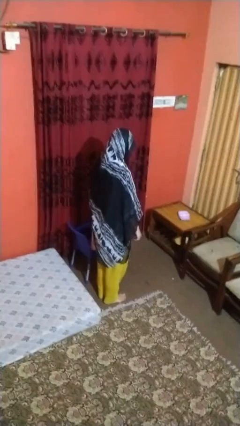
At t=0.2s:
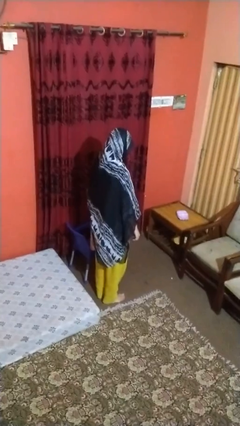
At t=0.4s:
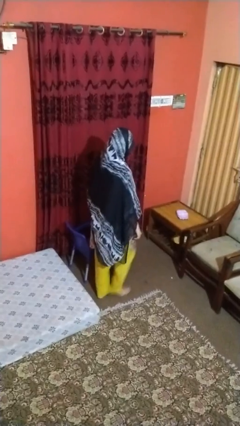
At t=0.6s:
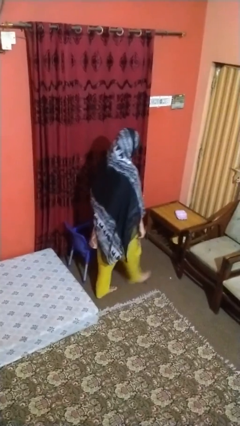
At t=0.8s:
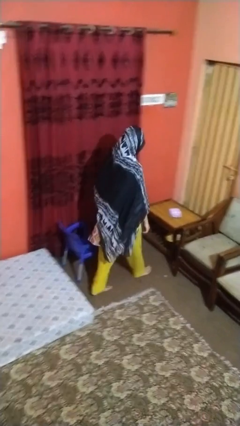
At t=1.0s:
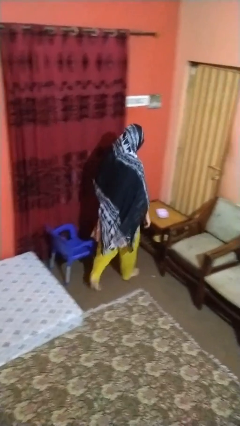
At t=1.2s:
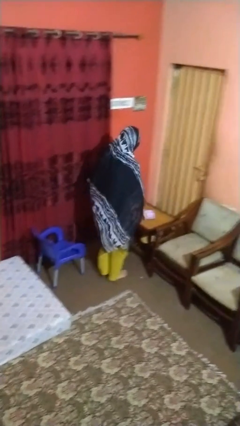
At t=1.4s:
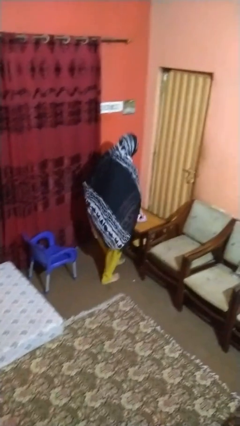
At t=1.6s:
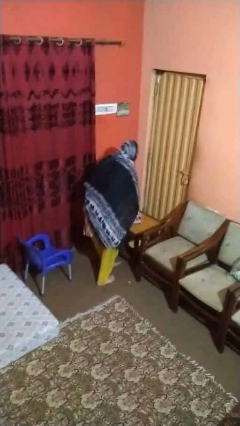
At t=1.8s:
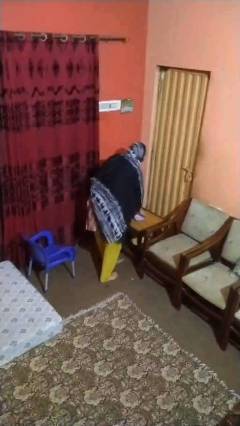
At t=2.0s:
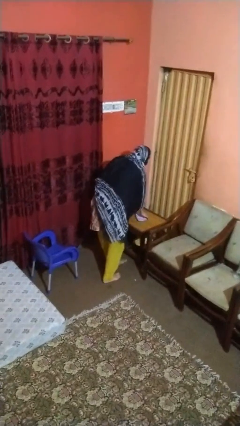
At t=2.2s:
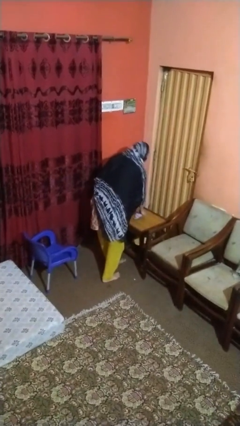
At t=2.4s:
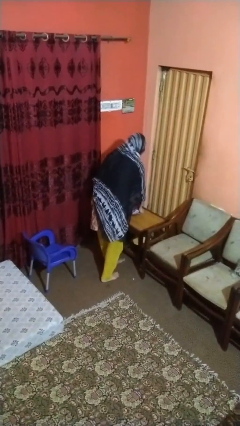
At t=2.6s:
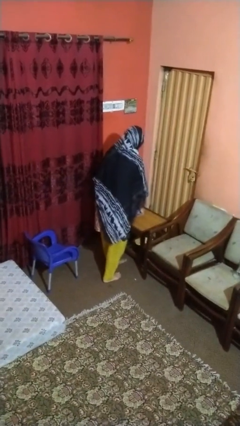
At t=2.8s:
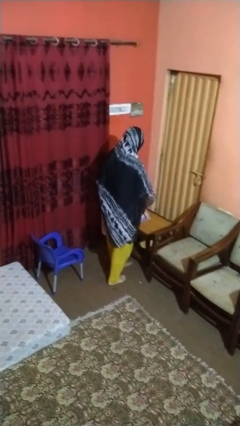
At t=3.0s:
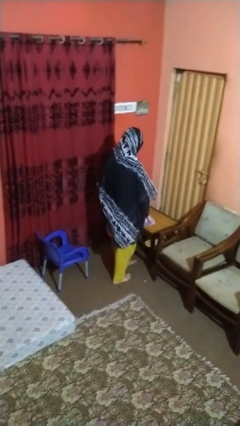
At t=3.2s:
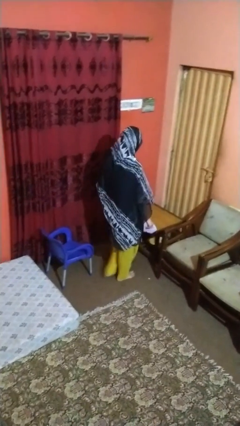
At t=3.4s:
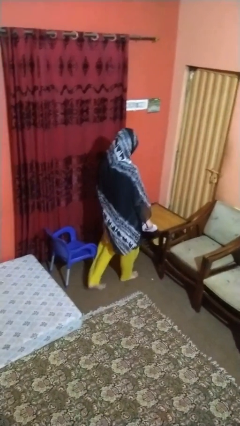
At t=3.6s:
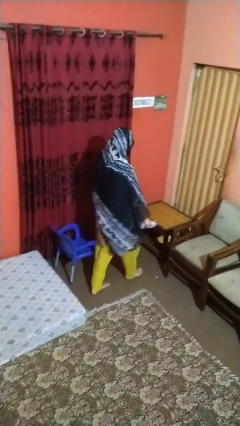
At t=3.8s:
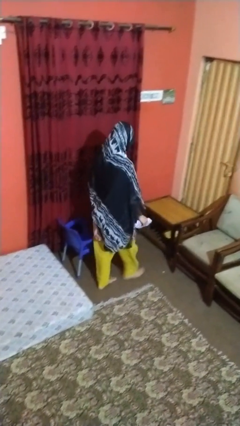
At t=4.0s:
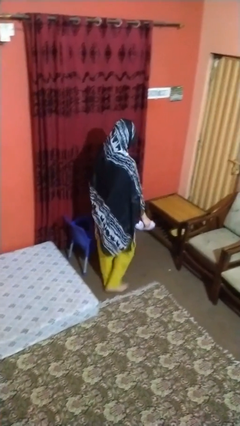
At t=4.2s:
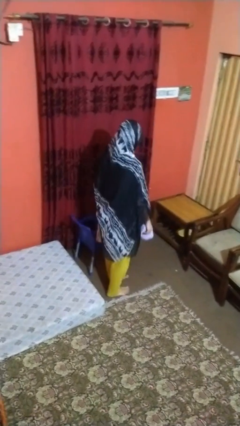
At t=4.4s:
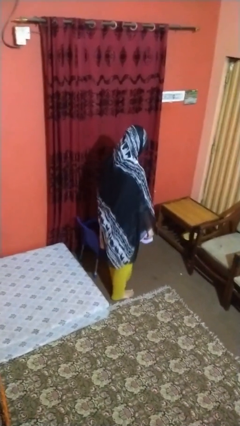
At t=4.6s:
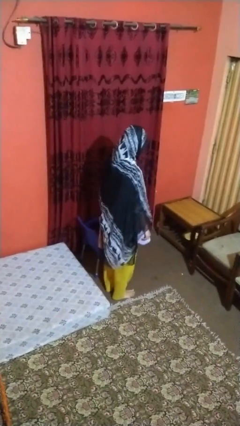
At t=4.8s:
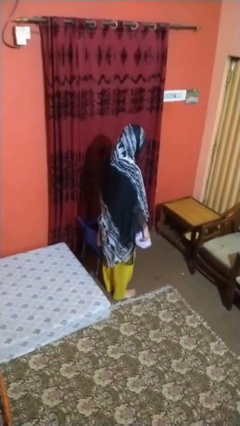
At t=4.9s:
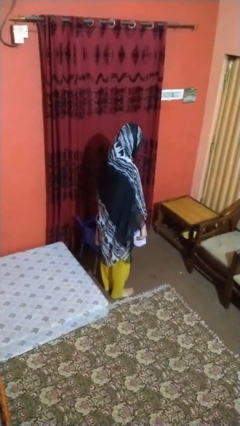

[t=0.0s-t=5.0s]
person picks up object from table

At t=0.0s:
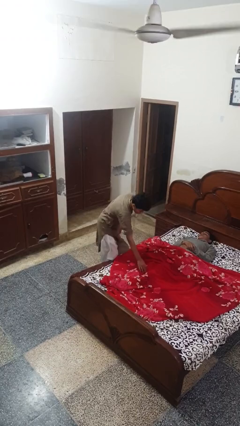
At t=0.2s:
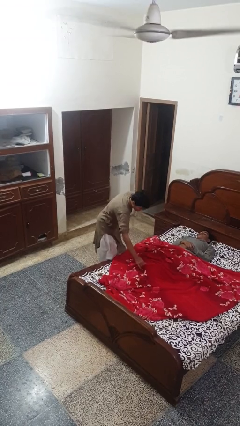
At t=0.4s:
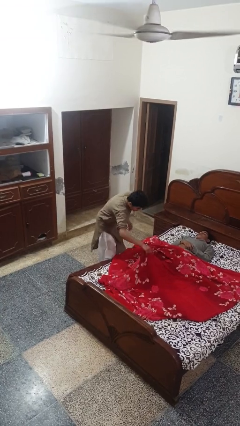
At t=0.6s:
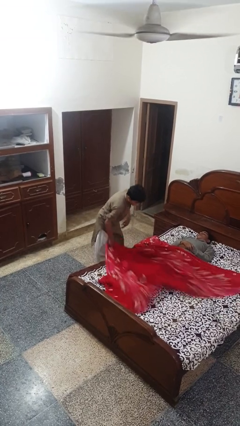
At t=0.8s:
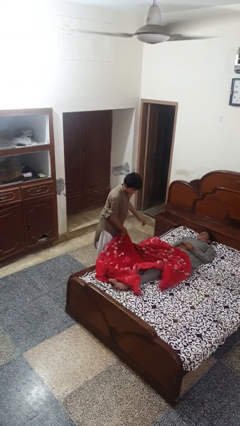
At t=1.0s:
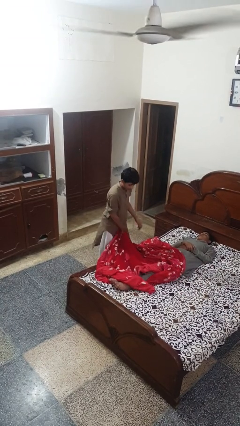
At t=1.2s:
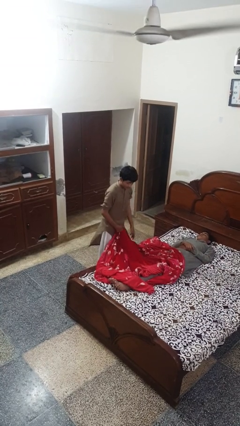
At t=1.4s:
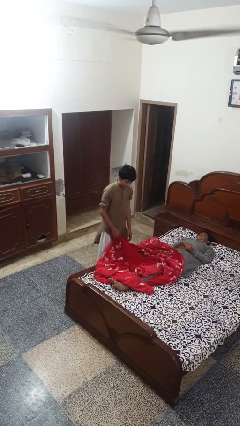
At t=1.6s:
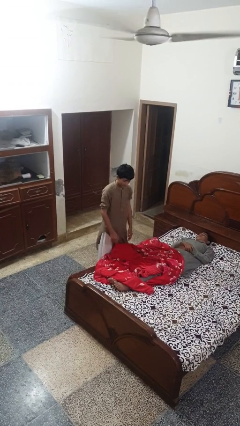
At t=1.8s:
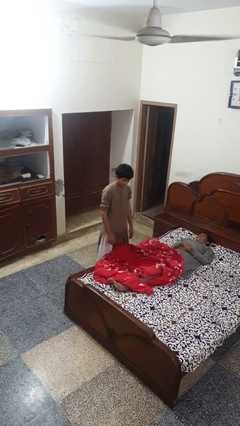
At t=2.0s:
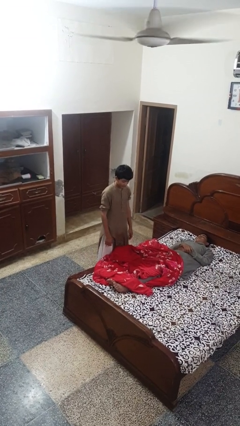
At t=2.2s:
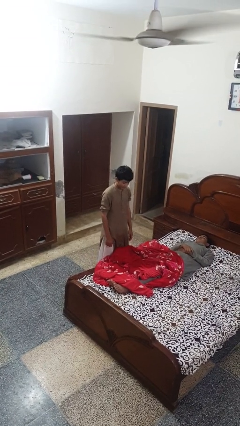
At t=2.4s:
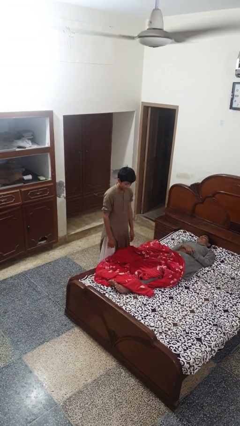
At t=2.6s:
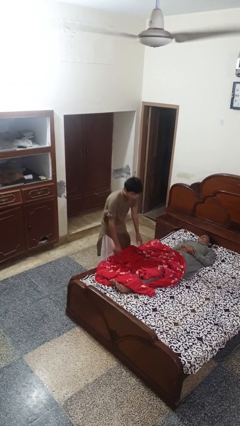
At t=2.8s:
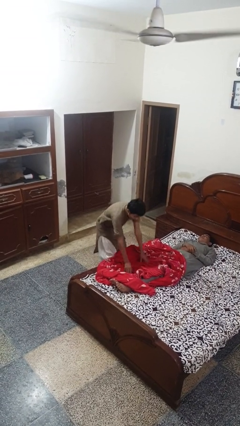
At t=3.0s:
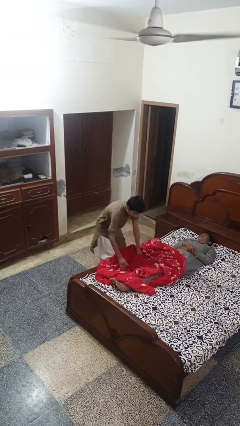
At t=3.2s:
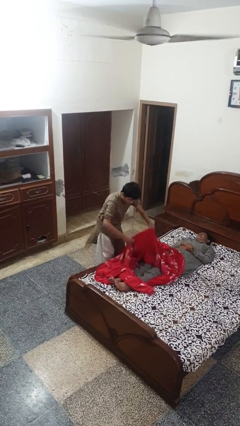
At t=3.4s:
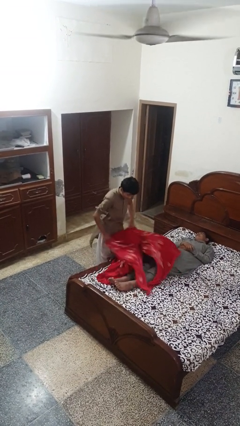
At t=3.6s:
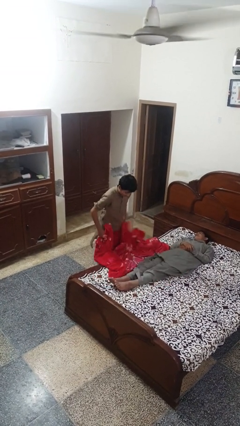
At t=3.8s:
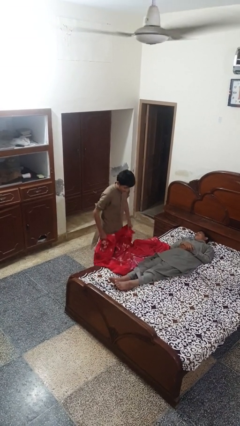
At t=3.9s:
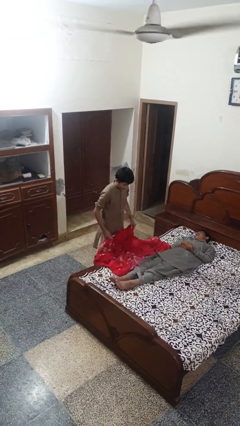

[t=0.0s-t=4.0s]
person uncovers friend with blanket

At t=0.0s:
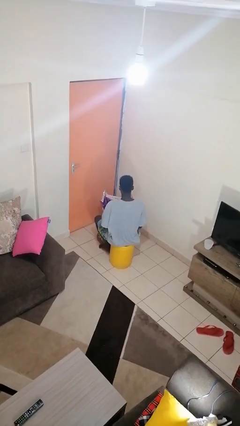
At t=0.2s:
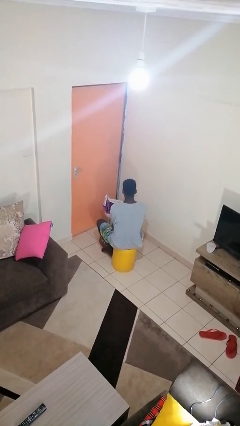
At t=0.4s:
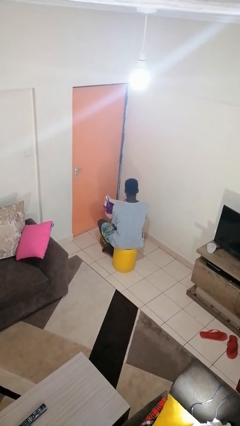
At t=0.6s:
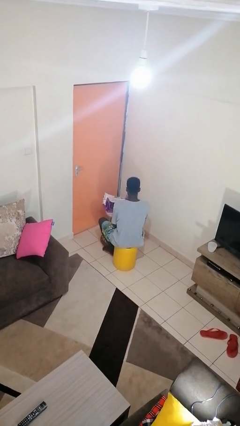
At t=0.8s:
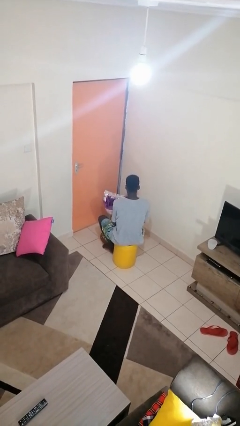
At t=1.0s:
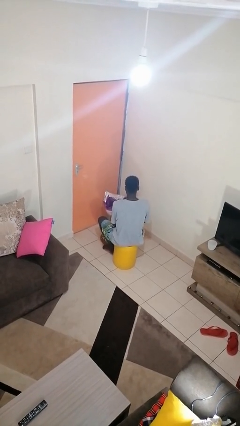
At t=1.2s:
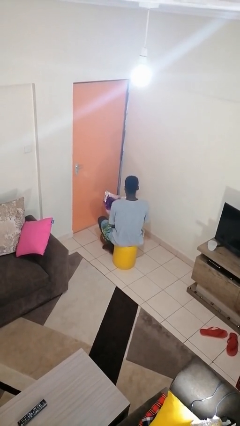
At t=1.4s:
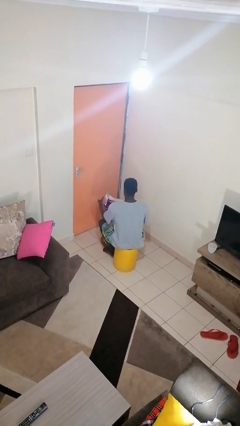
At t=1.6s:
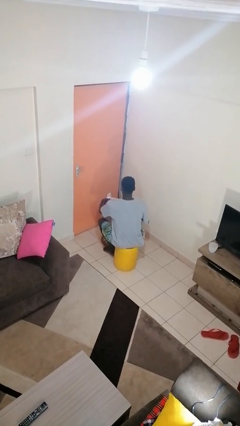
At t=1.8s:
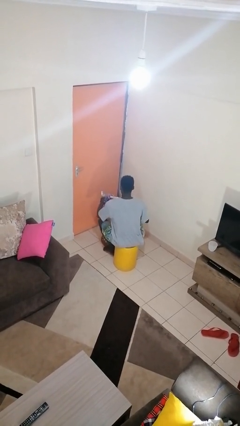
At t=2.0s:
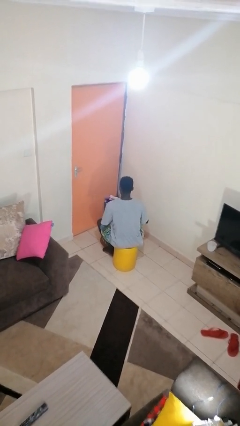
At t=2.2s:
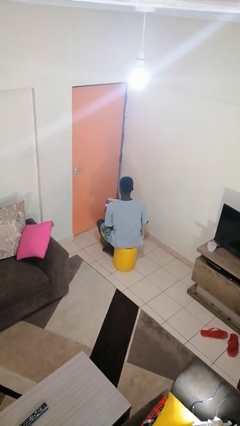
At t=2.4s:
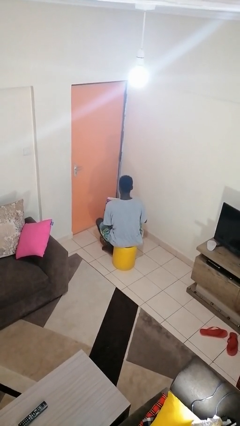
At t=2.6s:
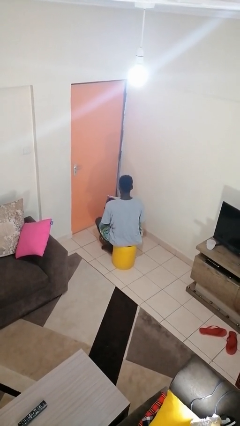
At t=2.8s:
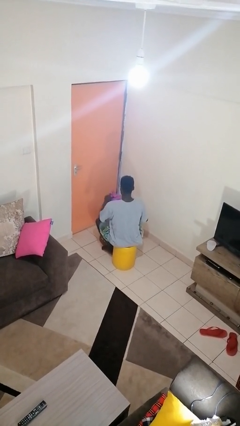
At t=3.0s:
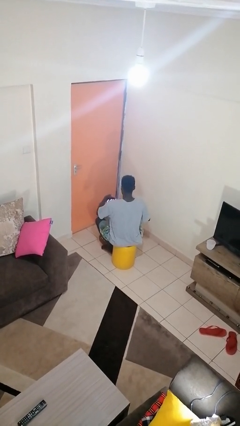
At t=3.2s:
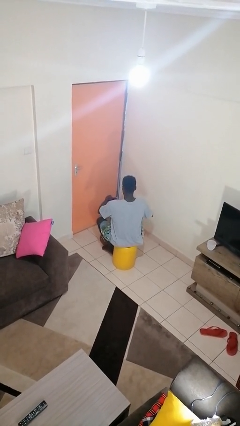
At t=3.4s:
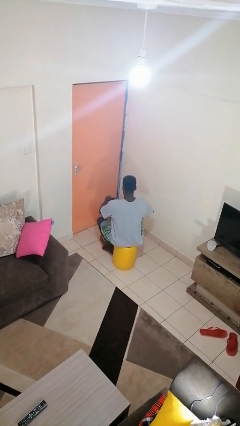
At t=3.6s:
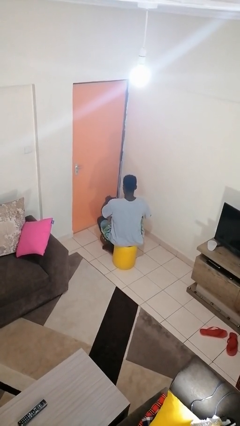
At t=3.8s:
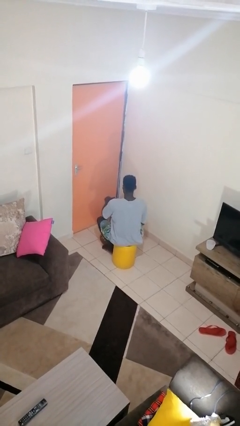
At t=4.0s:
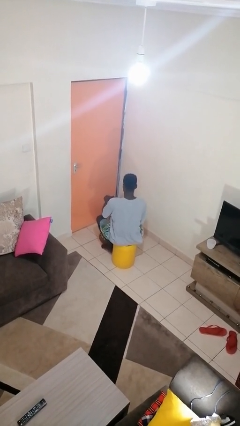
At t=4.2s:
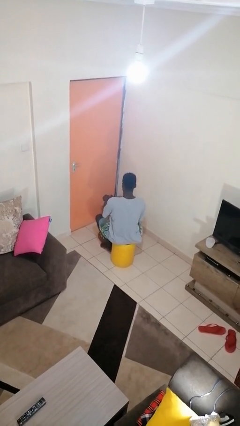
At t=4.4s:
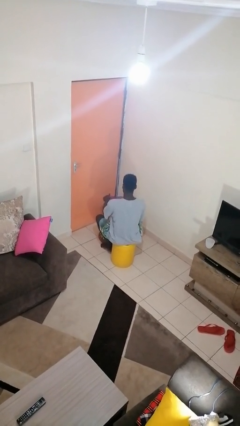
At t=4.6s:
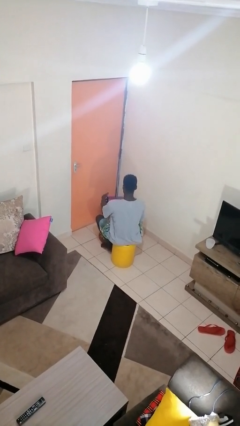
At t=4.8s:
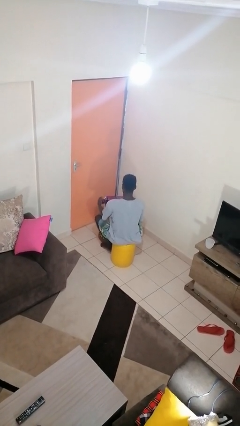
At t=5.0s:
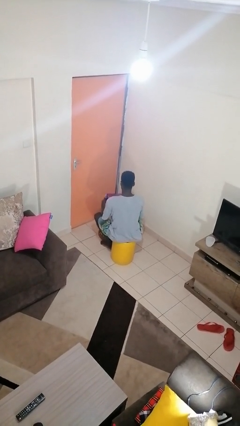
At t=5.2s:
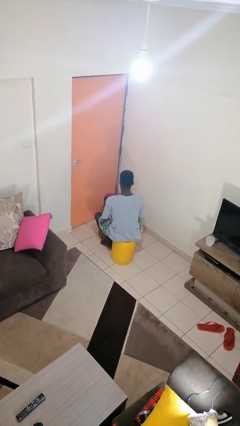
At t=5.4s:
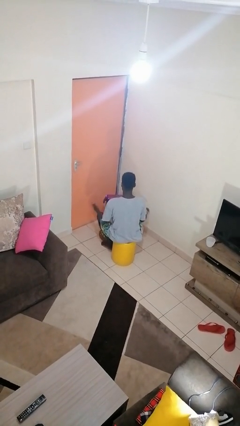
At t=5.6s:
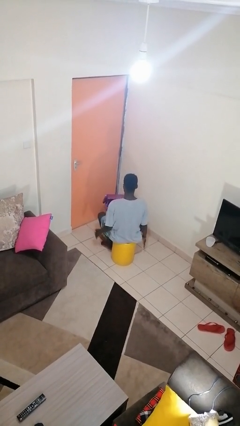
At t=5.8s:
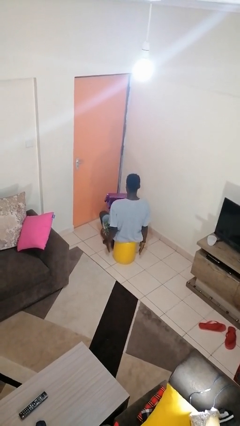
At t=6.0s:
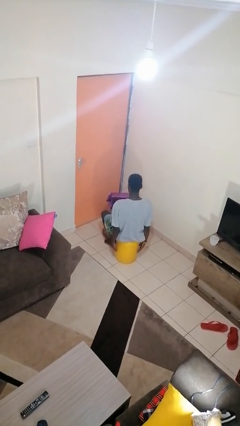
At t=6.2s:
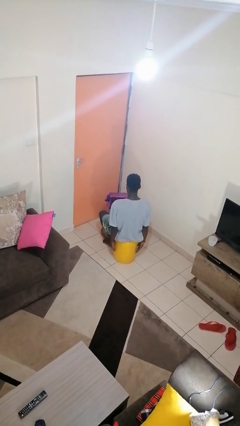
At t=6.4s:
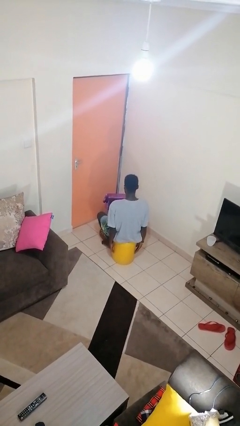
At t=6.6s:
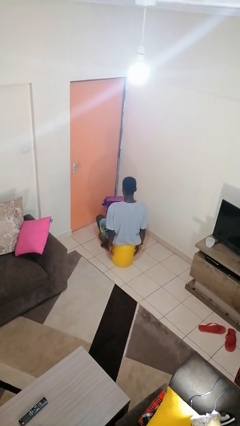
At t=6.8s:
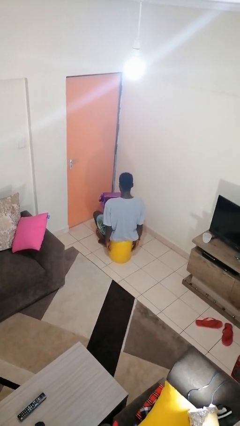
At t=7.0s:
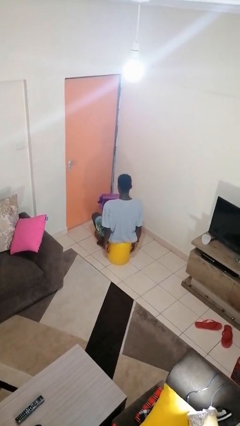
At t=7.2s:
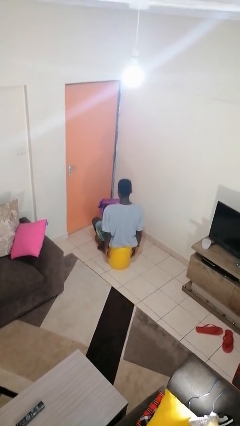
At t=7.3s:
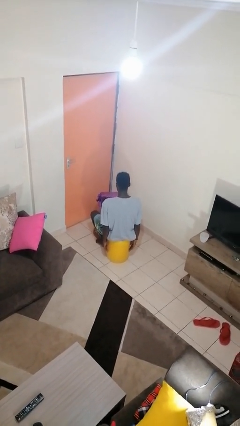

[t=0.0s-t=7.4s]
person wraps box

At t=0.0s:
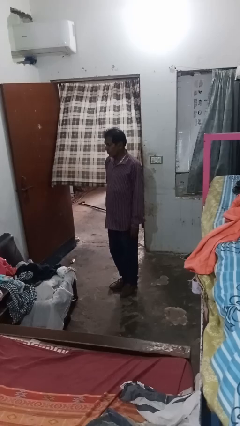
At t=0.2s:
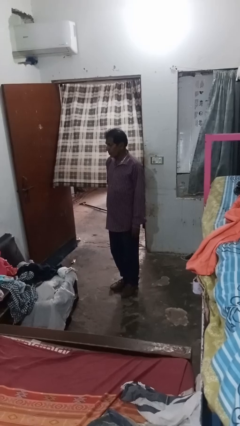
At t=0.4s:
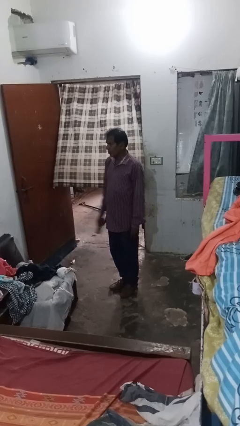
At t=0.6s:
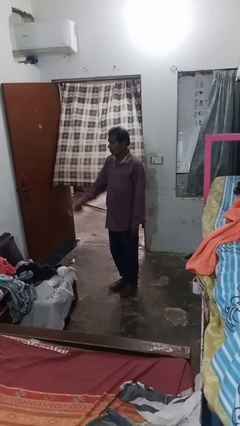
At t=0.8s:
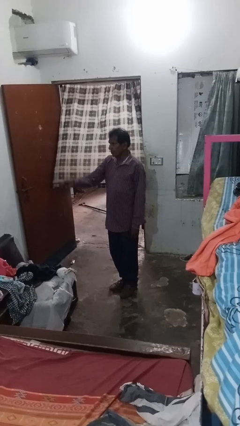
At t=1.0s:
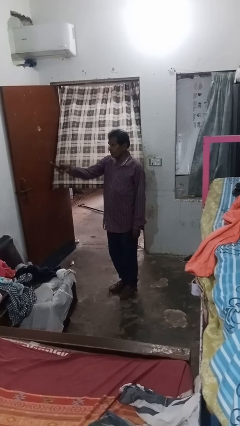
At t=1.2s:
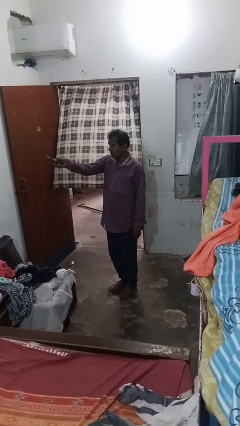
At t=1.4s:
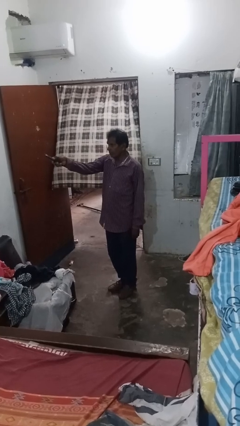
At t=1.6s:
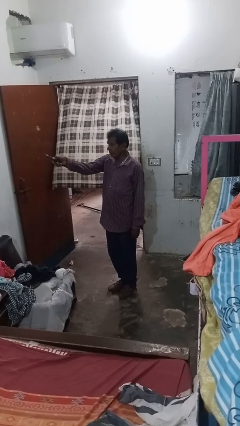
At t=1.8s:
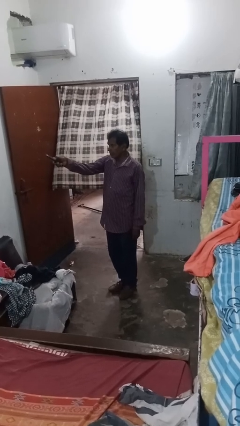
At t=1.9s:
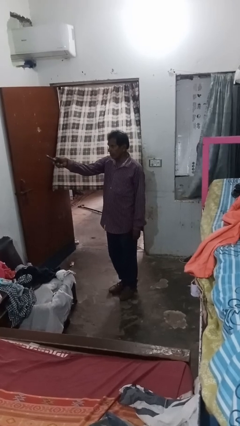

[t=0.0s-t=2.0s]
person uses television remote
